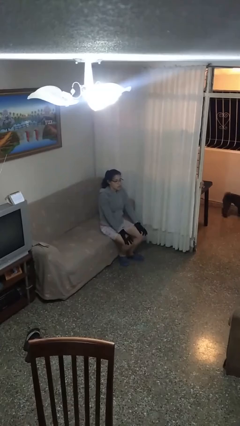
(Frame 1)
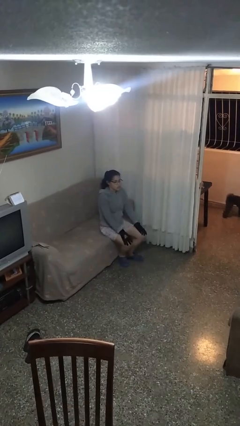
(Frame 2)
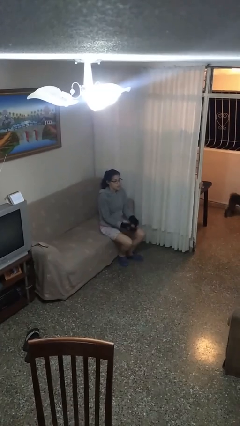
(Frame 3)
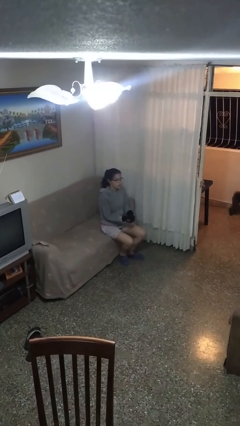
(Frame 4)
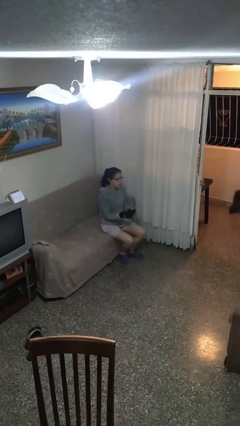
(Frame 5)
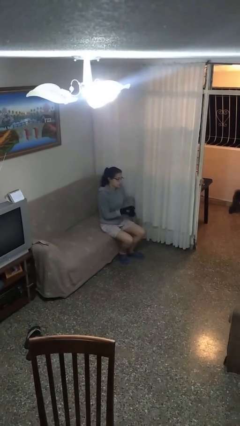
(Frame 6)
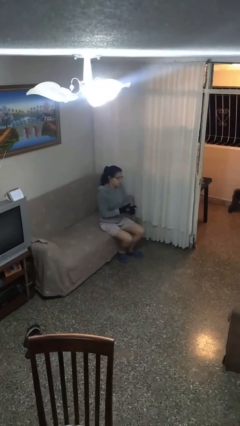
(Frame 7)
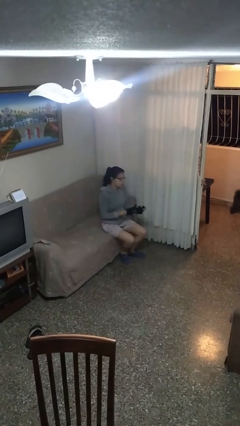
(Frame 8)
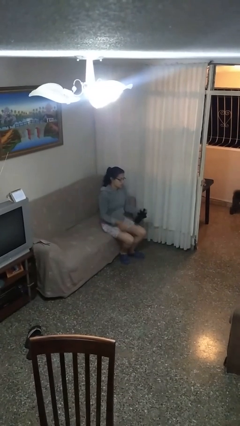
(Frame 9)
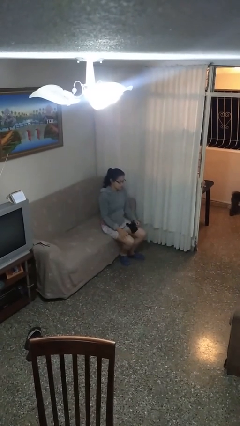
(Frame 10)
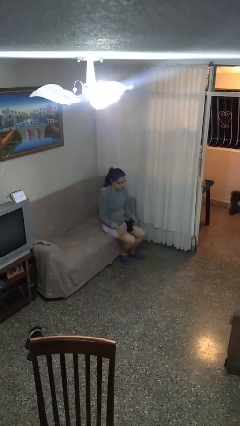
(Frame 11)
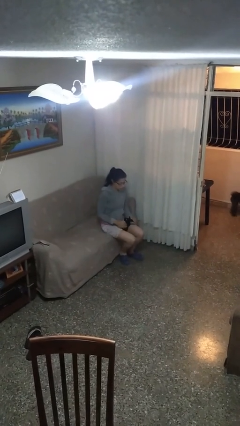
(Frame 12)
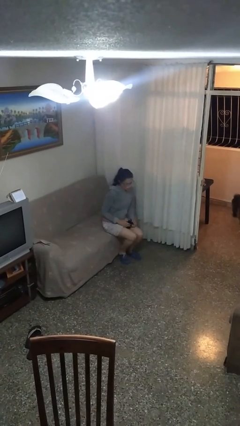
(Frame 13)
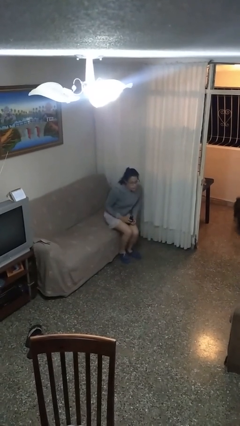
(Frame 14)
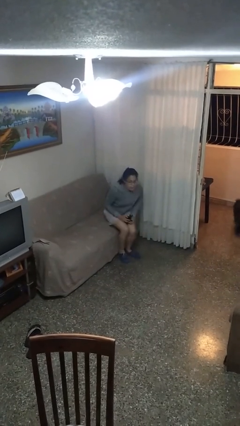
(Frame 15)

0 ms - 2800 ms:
person takes off gloves

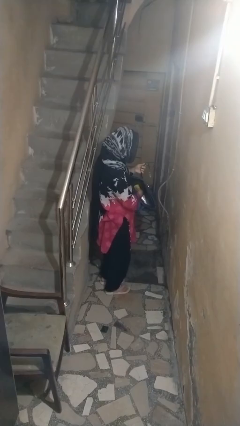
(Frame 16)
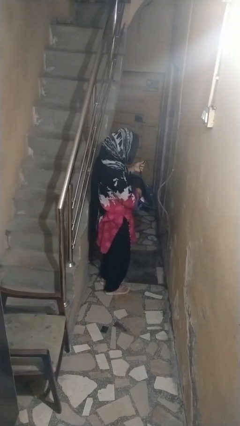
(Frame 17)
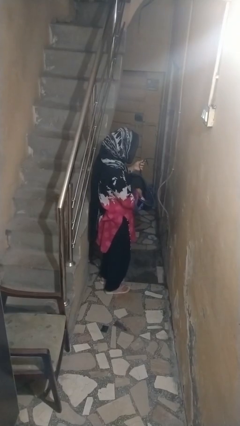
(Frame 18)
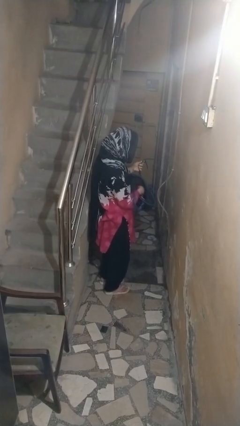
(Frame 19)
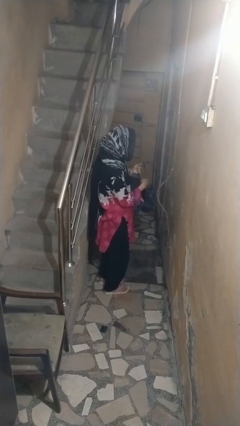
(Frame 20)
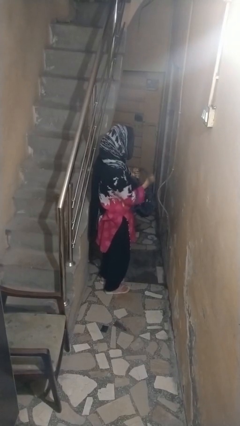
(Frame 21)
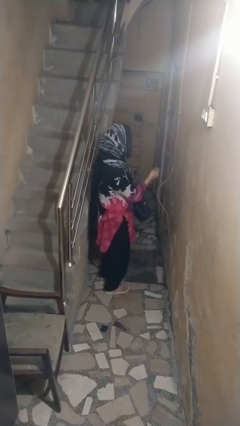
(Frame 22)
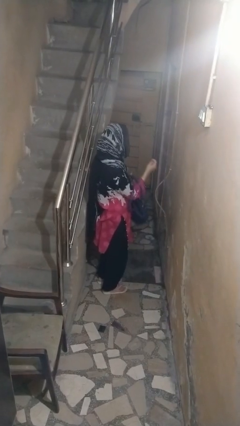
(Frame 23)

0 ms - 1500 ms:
person puts object into purse

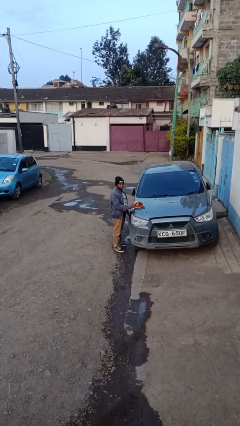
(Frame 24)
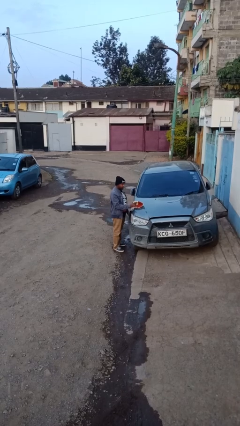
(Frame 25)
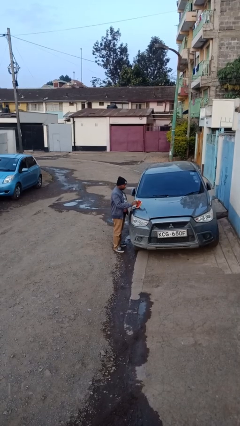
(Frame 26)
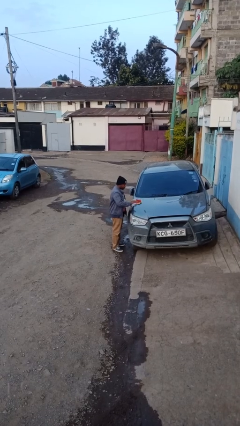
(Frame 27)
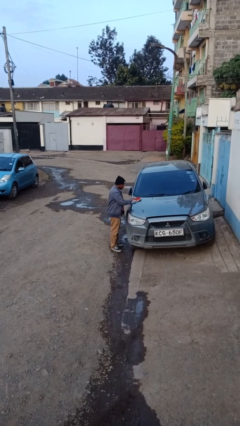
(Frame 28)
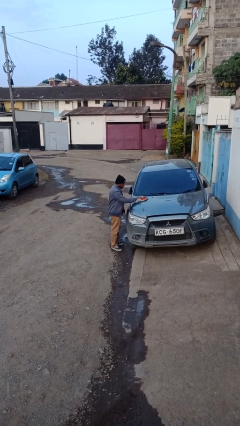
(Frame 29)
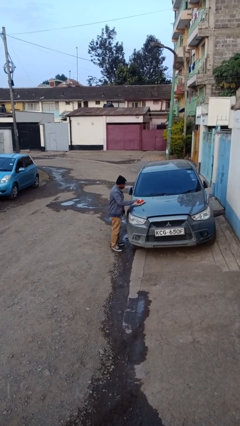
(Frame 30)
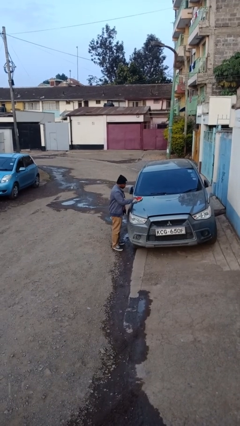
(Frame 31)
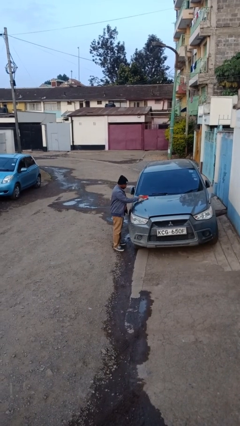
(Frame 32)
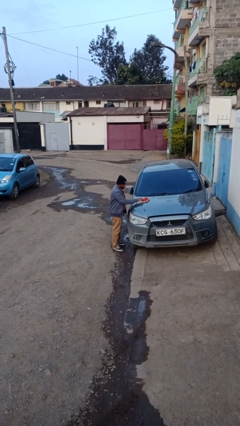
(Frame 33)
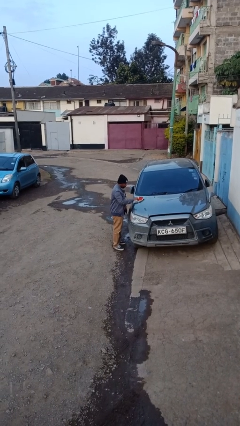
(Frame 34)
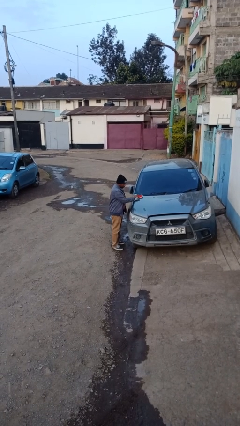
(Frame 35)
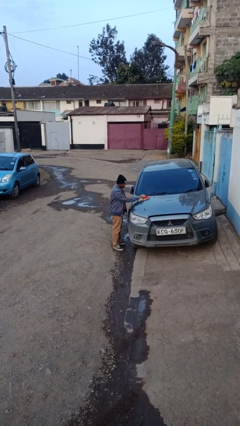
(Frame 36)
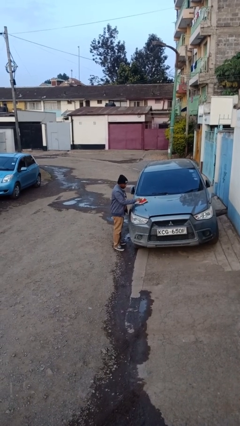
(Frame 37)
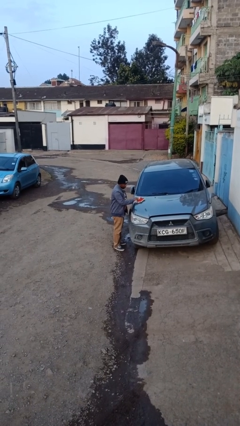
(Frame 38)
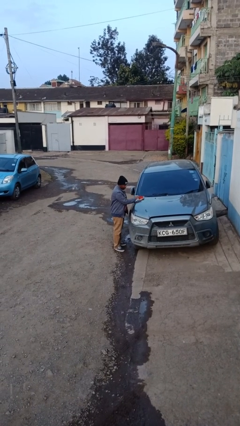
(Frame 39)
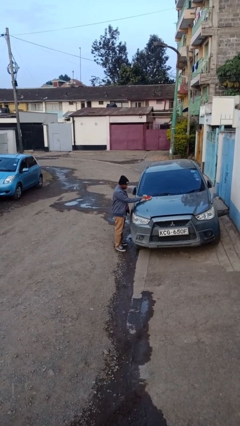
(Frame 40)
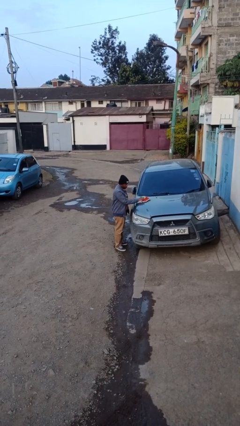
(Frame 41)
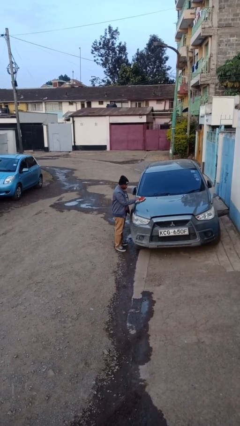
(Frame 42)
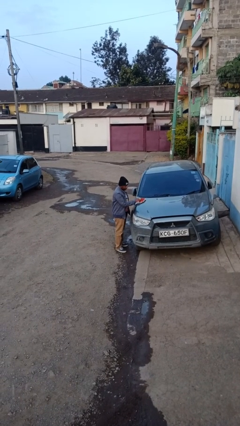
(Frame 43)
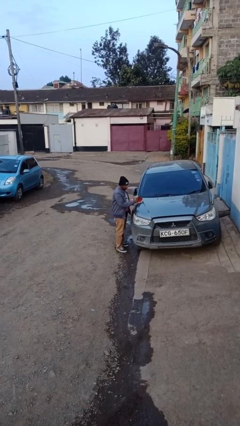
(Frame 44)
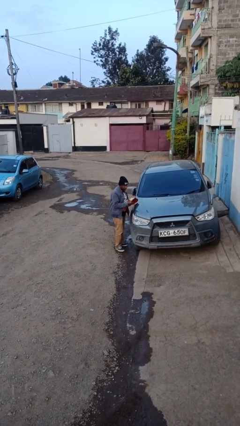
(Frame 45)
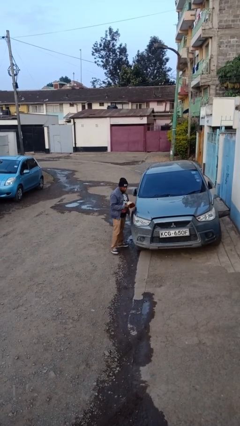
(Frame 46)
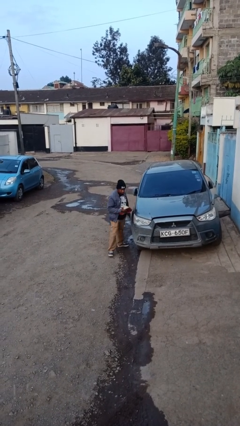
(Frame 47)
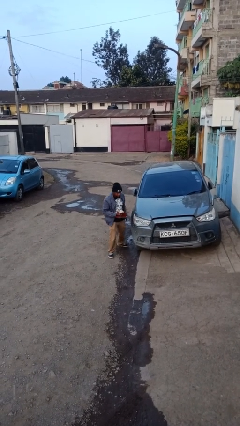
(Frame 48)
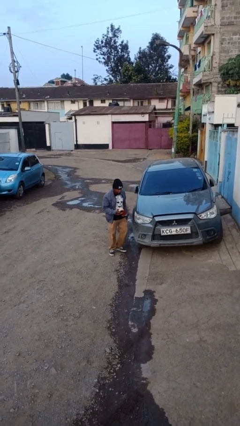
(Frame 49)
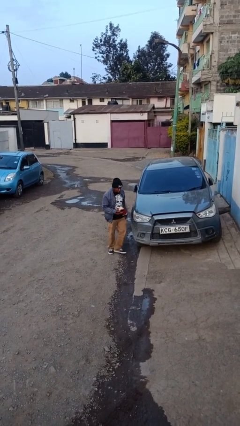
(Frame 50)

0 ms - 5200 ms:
person polishes car with rag

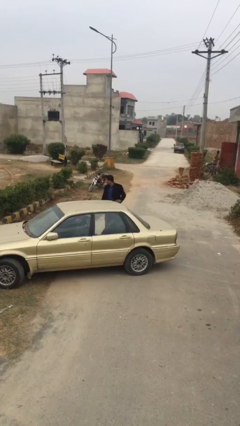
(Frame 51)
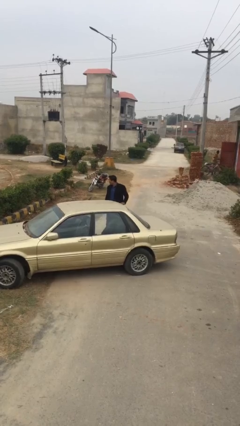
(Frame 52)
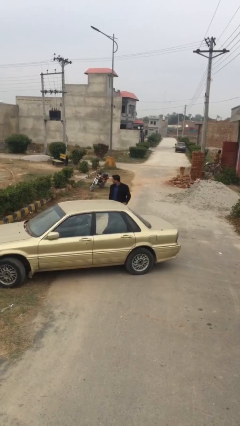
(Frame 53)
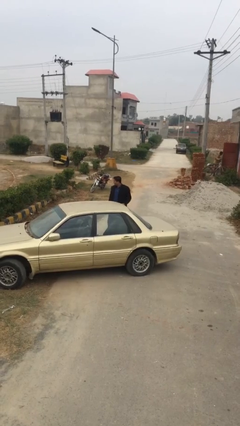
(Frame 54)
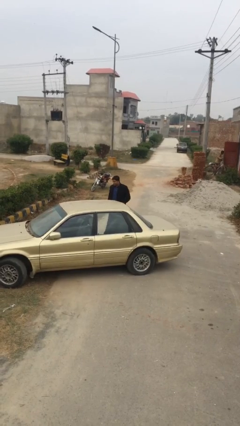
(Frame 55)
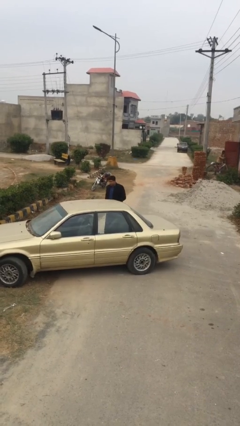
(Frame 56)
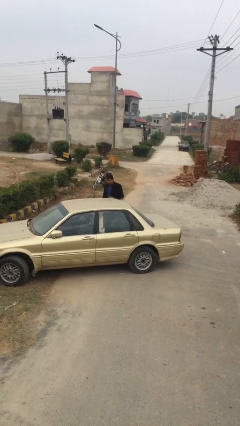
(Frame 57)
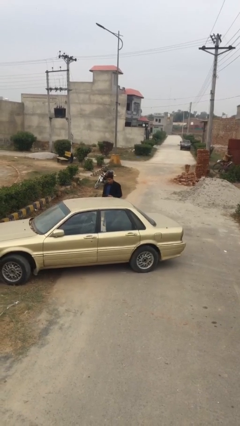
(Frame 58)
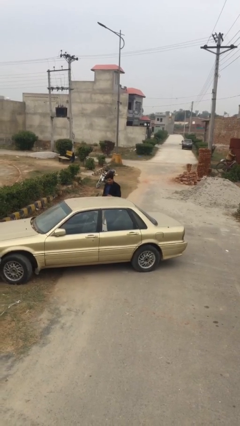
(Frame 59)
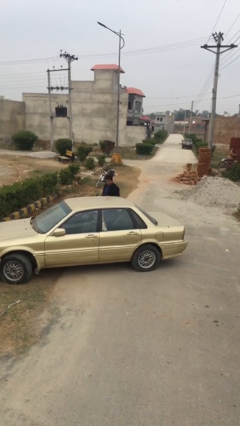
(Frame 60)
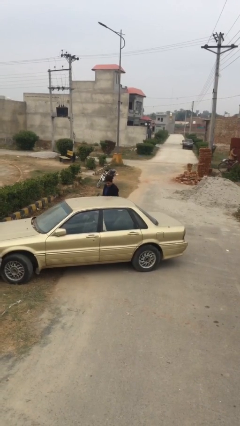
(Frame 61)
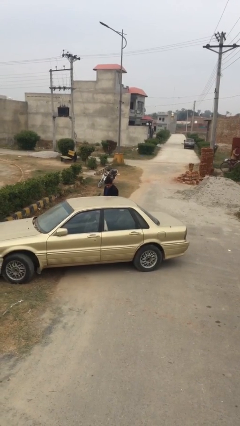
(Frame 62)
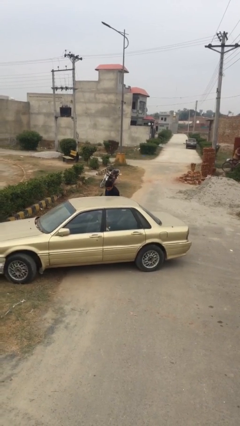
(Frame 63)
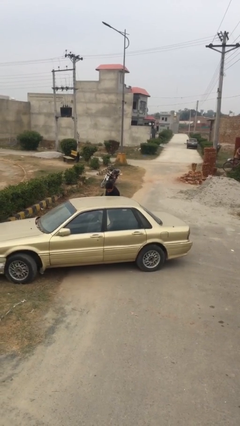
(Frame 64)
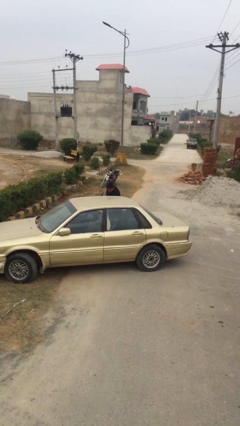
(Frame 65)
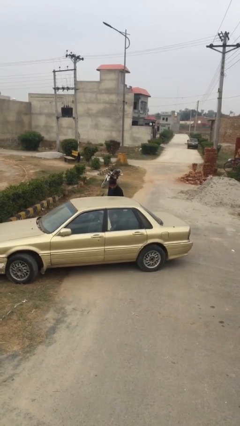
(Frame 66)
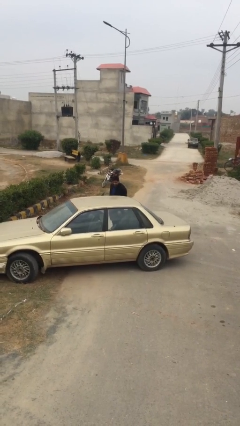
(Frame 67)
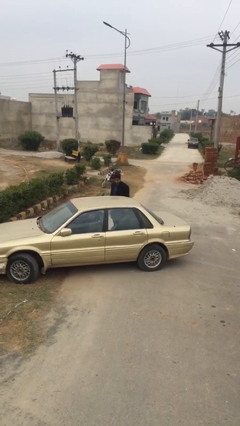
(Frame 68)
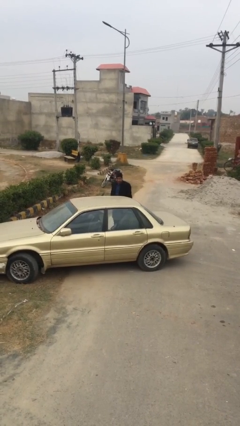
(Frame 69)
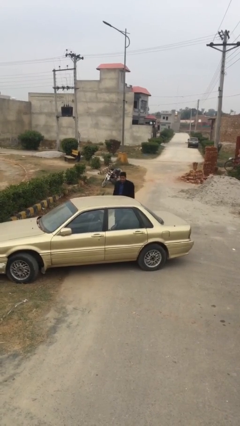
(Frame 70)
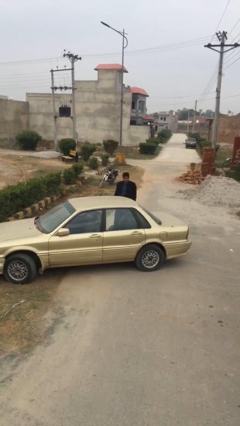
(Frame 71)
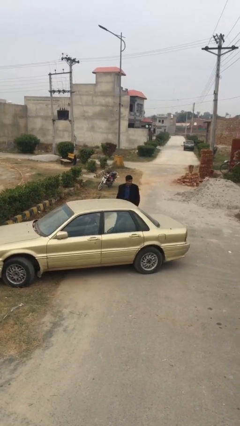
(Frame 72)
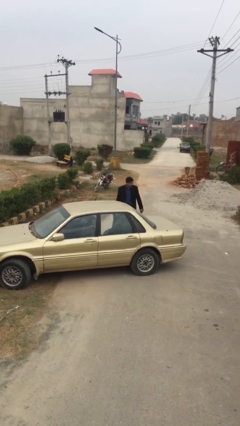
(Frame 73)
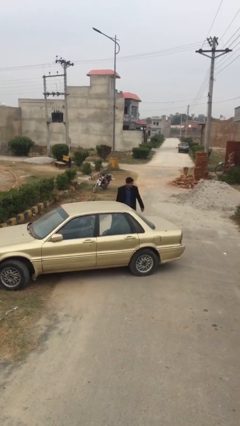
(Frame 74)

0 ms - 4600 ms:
person loads car

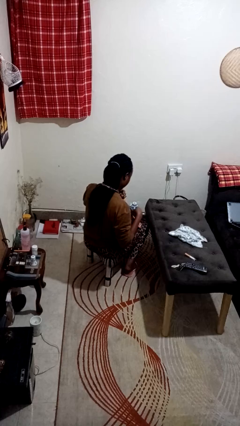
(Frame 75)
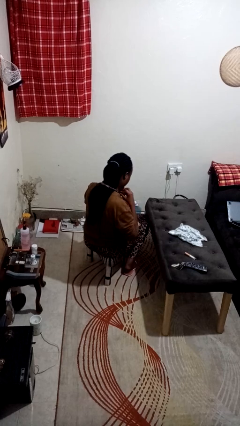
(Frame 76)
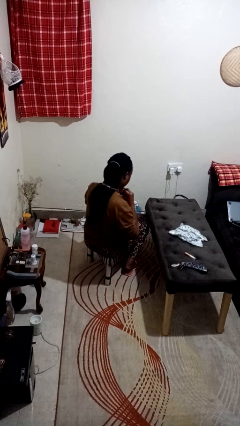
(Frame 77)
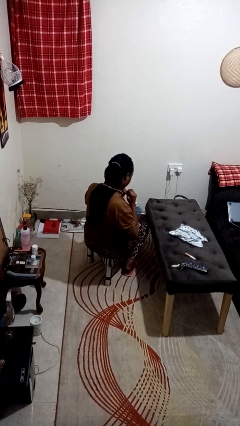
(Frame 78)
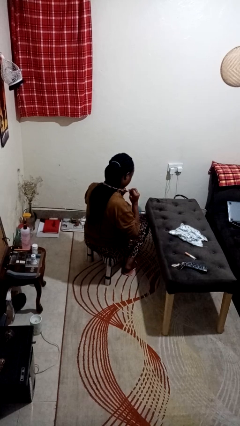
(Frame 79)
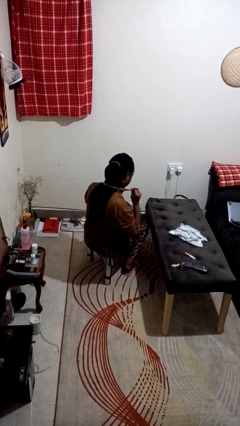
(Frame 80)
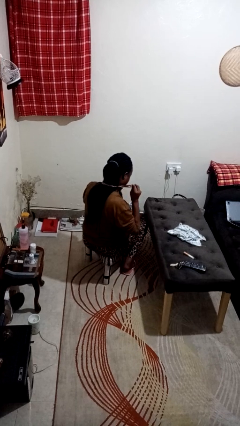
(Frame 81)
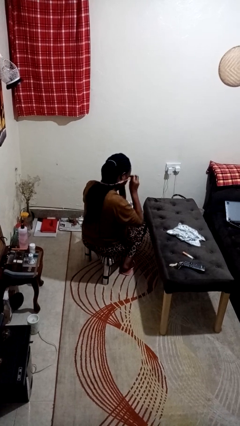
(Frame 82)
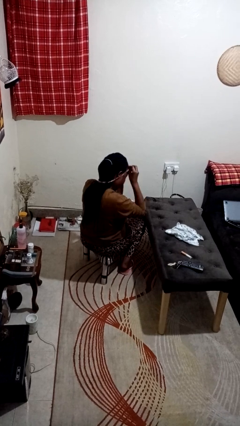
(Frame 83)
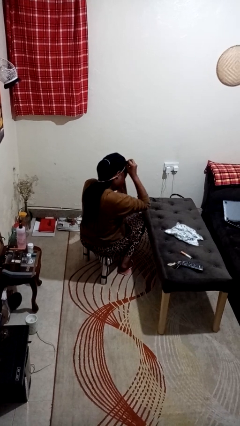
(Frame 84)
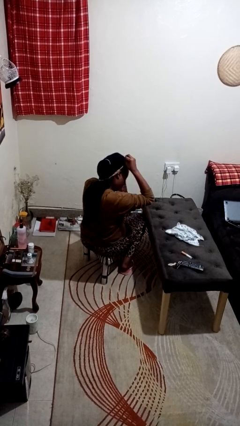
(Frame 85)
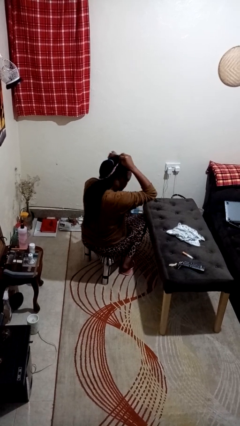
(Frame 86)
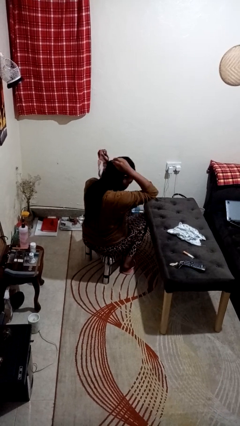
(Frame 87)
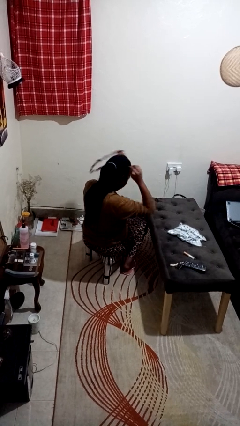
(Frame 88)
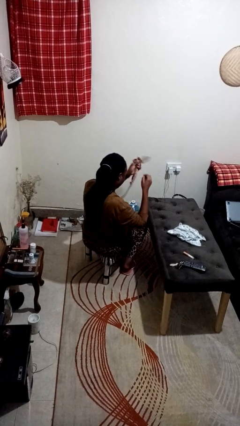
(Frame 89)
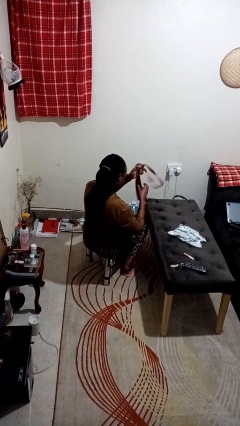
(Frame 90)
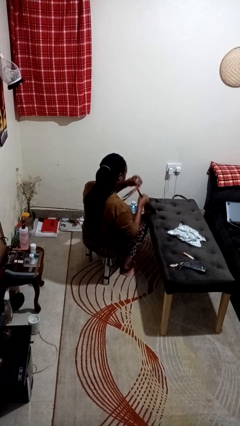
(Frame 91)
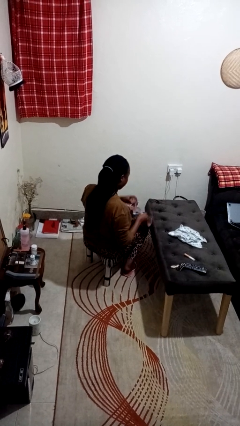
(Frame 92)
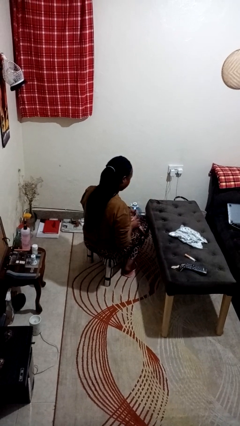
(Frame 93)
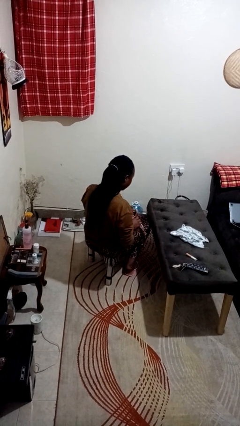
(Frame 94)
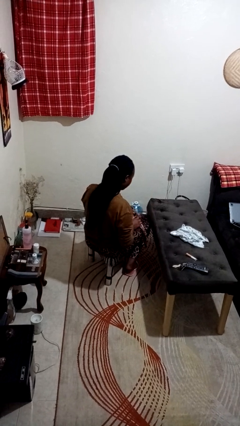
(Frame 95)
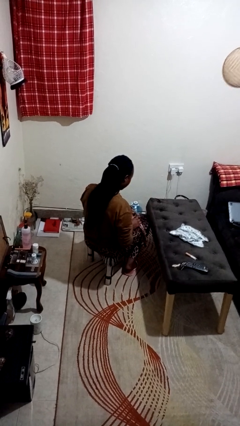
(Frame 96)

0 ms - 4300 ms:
person takes off necktie
